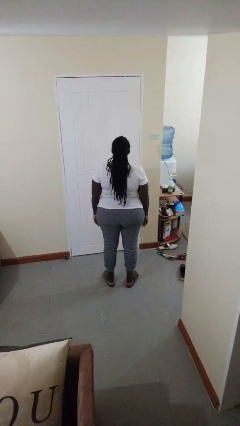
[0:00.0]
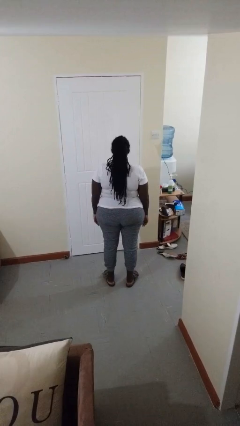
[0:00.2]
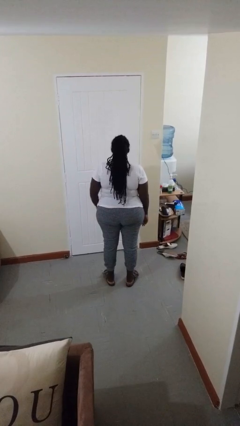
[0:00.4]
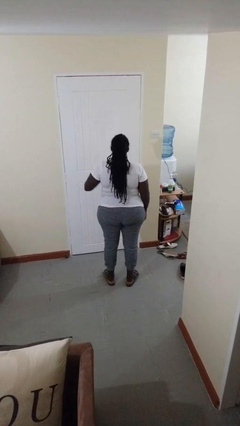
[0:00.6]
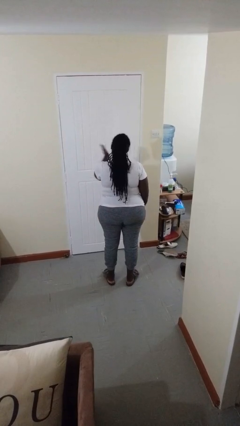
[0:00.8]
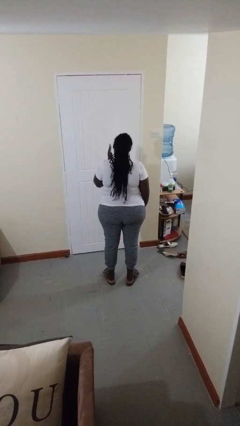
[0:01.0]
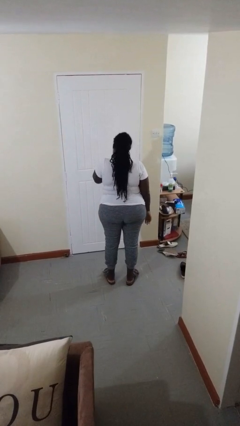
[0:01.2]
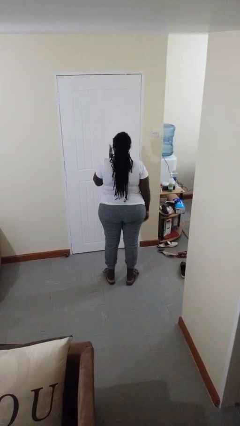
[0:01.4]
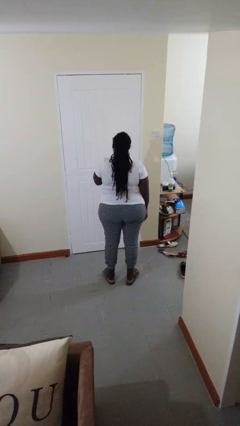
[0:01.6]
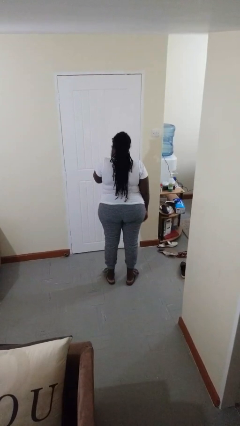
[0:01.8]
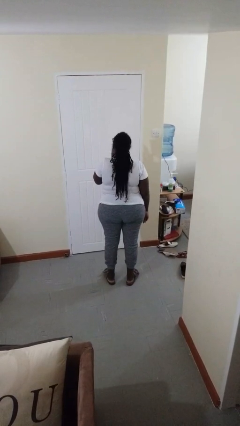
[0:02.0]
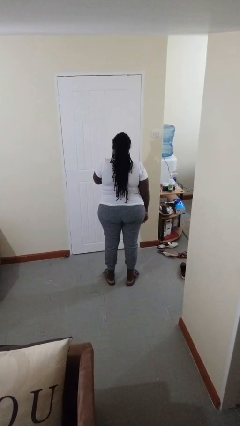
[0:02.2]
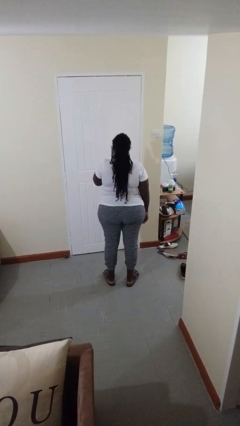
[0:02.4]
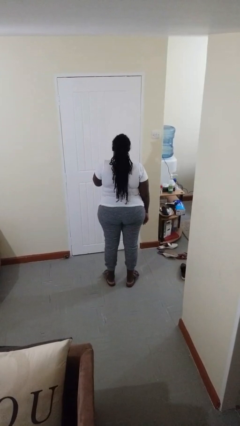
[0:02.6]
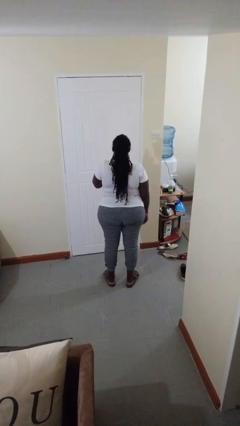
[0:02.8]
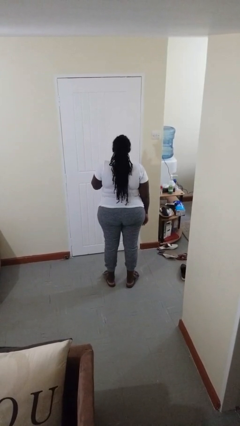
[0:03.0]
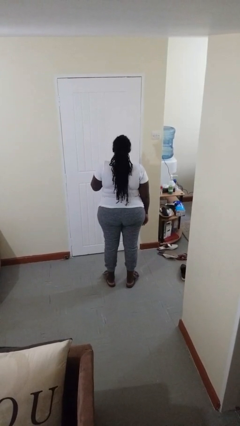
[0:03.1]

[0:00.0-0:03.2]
person swats bug

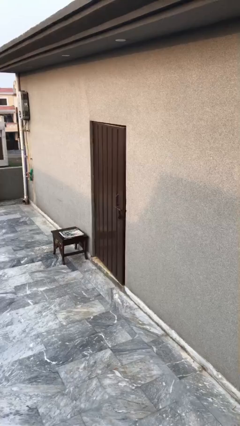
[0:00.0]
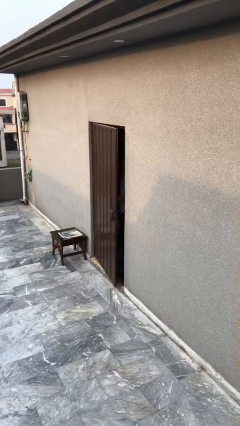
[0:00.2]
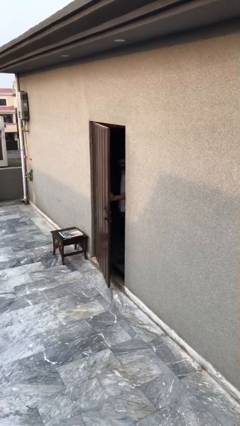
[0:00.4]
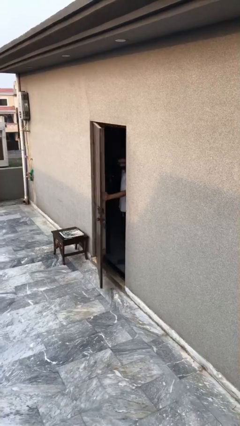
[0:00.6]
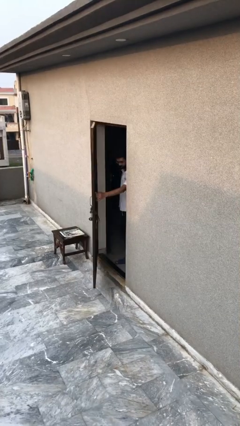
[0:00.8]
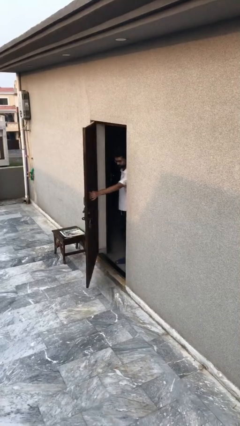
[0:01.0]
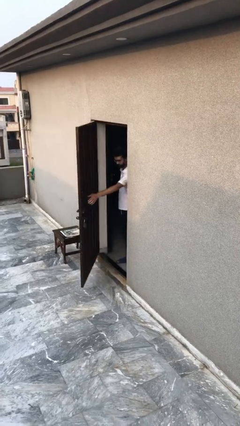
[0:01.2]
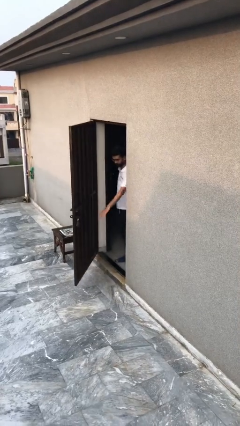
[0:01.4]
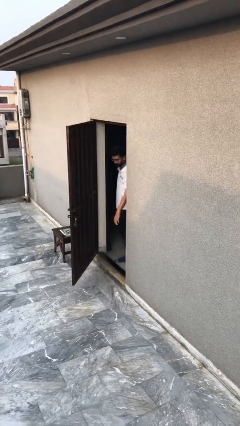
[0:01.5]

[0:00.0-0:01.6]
person opens facility door

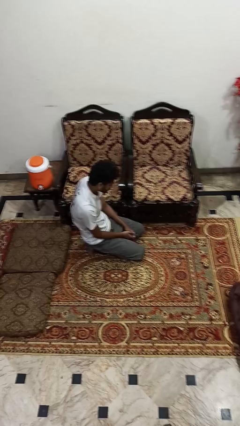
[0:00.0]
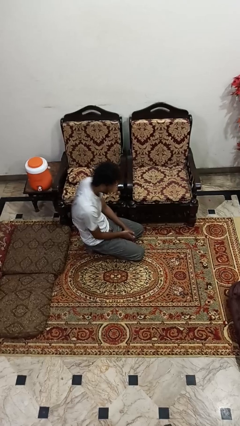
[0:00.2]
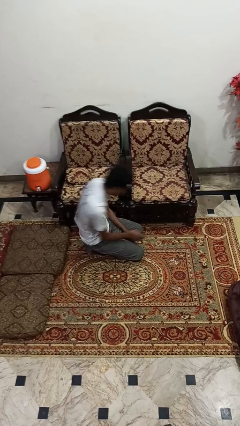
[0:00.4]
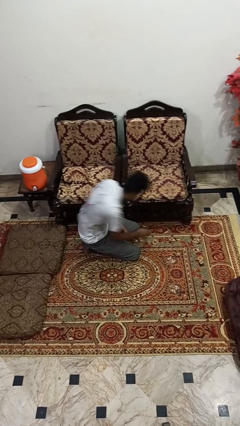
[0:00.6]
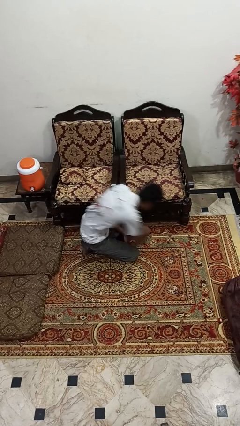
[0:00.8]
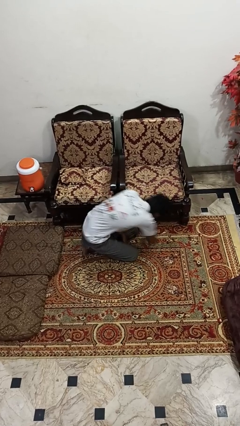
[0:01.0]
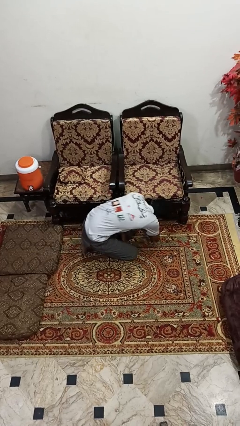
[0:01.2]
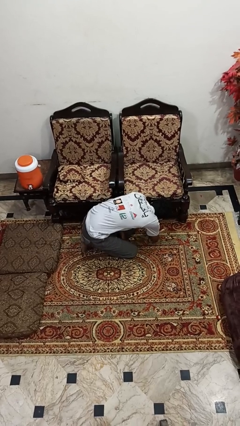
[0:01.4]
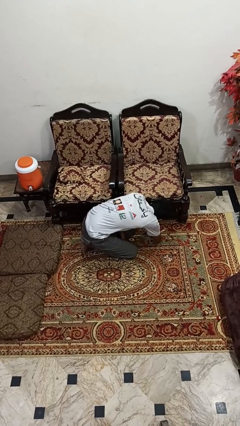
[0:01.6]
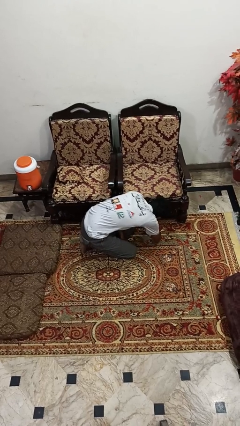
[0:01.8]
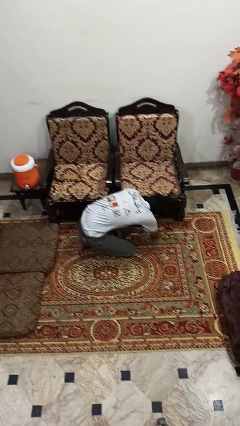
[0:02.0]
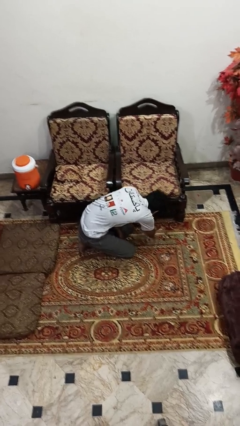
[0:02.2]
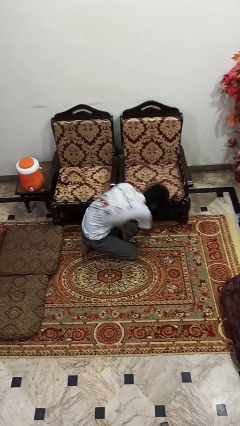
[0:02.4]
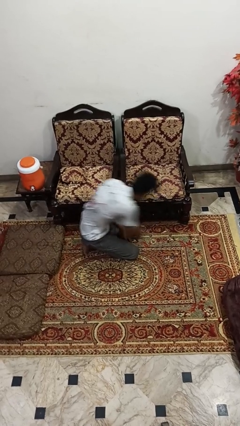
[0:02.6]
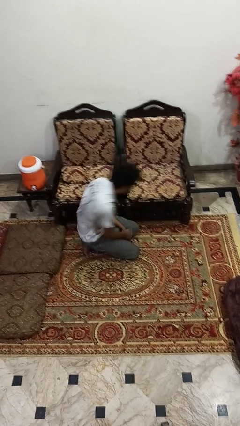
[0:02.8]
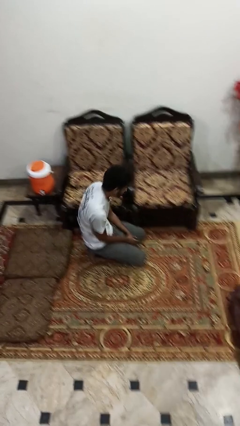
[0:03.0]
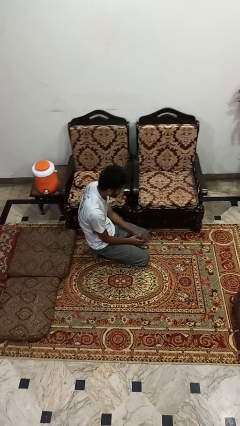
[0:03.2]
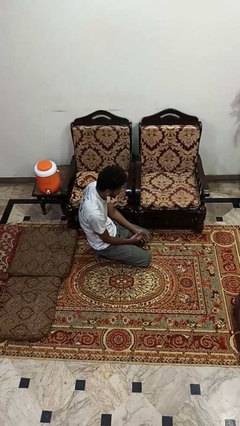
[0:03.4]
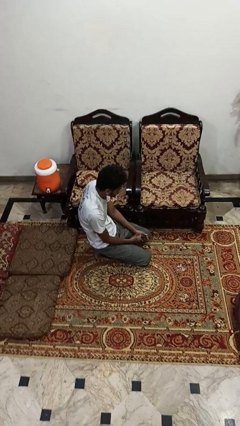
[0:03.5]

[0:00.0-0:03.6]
person searches under couch

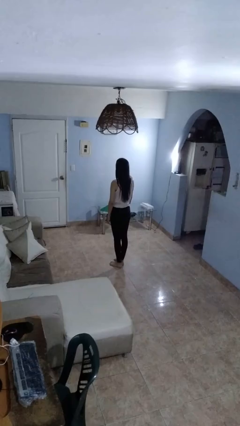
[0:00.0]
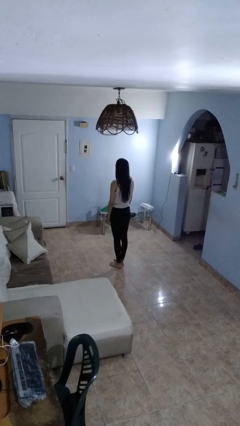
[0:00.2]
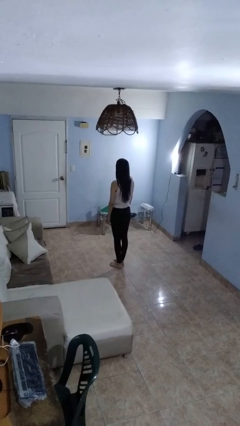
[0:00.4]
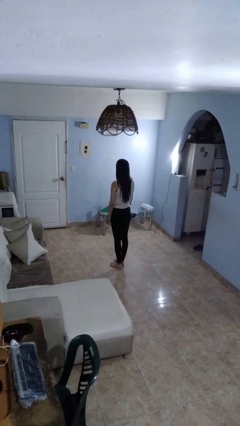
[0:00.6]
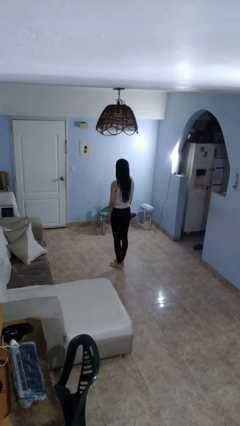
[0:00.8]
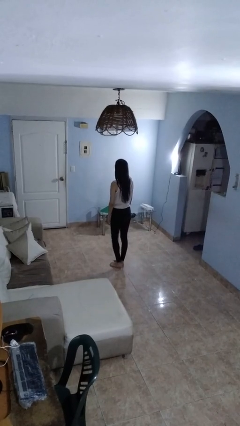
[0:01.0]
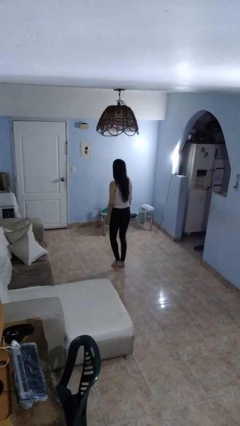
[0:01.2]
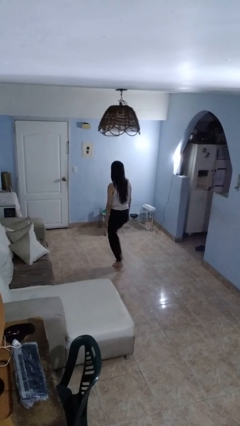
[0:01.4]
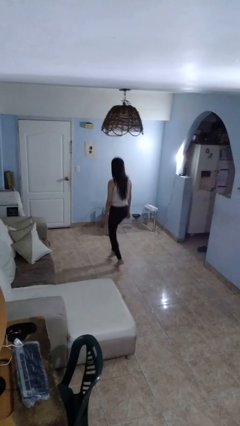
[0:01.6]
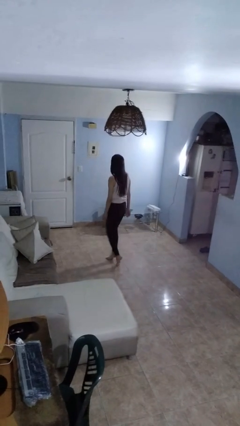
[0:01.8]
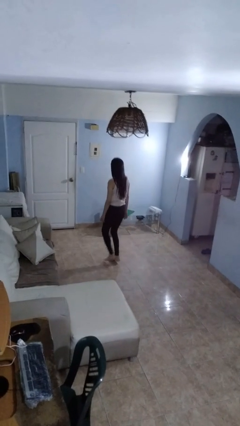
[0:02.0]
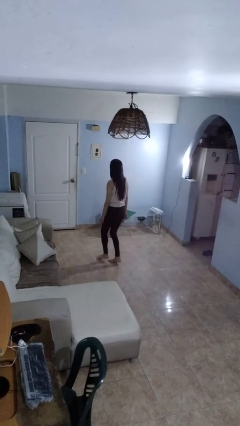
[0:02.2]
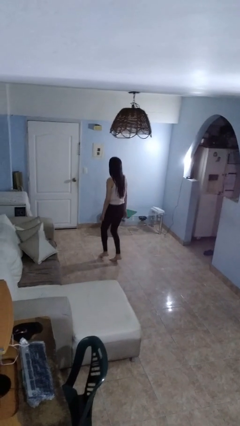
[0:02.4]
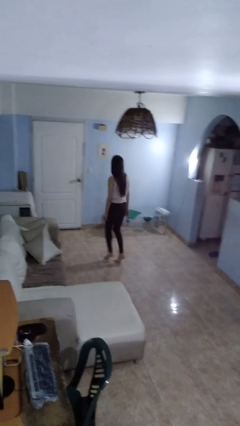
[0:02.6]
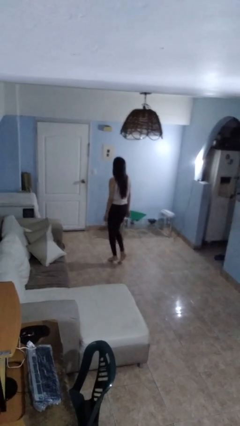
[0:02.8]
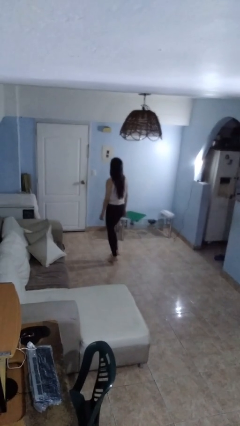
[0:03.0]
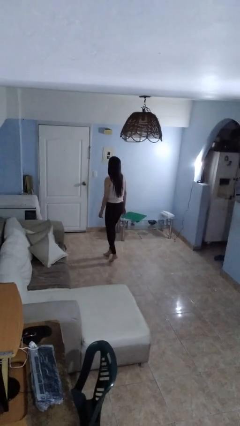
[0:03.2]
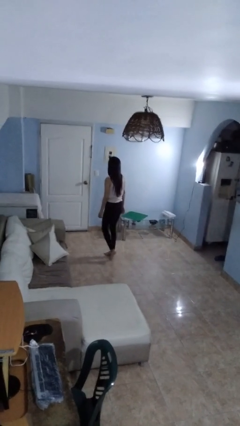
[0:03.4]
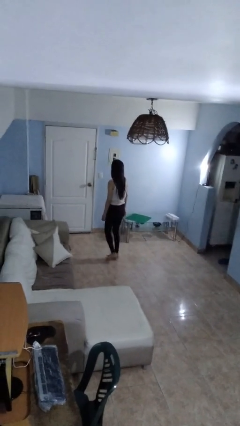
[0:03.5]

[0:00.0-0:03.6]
person walks tiptoe

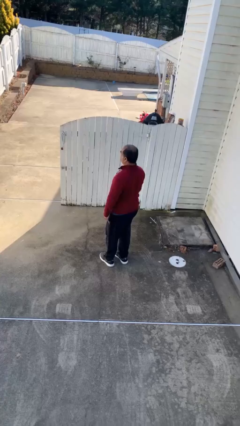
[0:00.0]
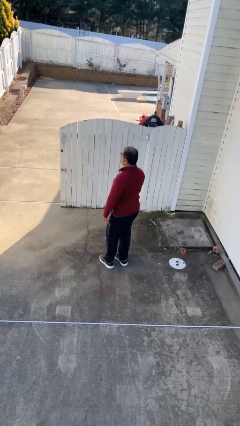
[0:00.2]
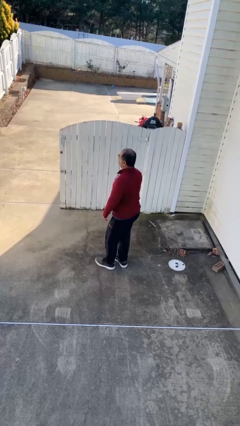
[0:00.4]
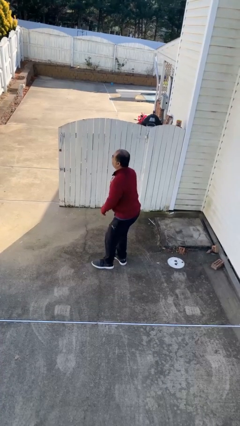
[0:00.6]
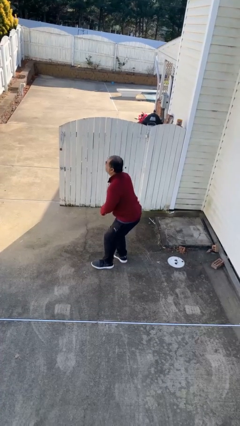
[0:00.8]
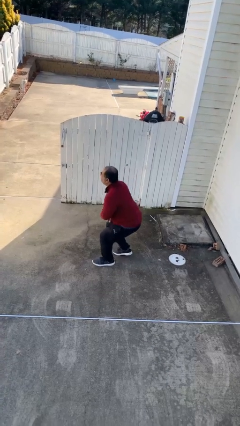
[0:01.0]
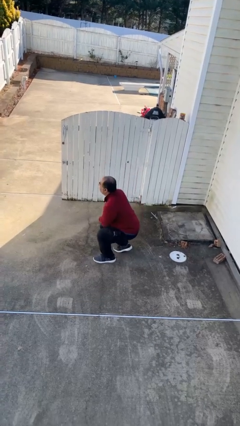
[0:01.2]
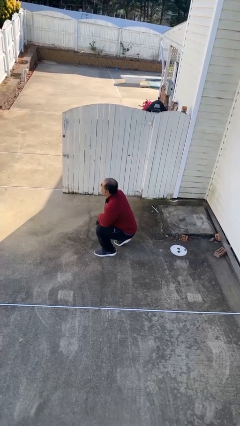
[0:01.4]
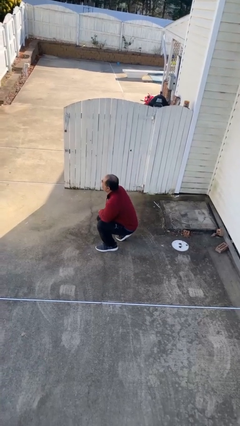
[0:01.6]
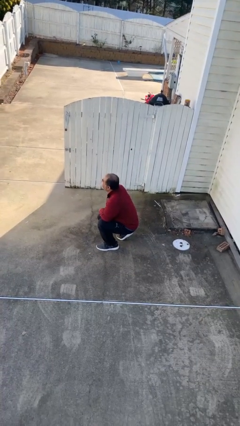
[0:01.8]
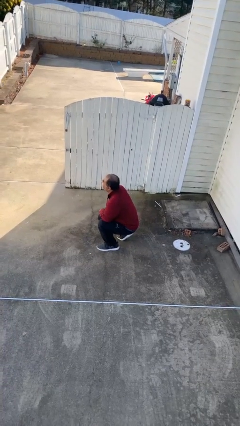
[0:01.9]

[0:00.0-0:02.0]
person sits down

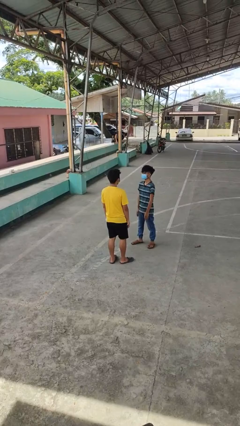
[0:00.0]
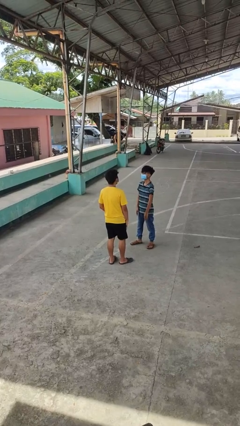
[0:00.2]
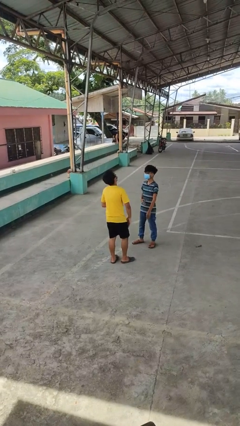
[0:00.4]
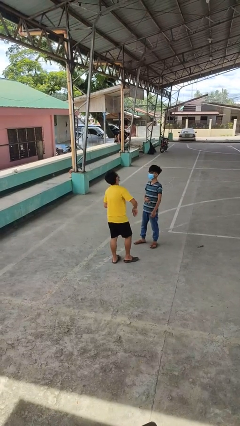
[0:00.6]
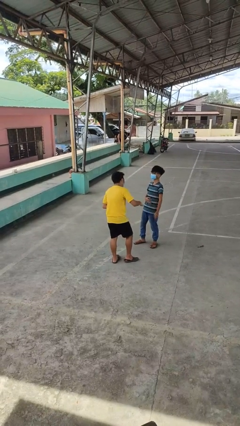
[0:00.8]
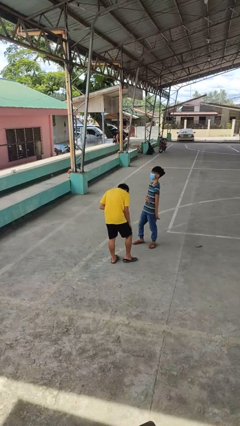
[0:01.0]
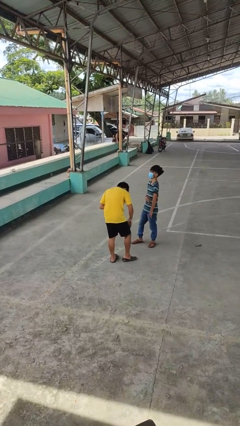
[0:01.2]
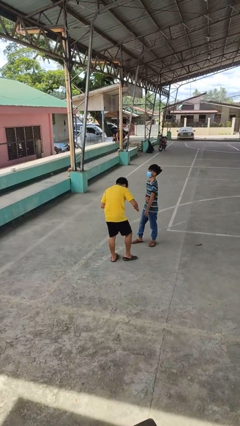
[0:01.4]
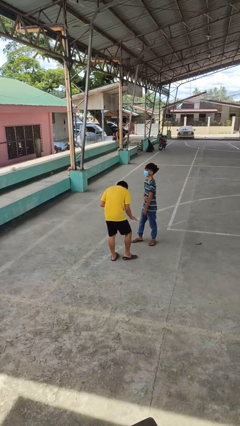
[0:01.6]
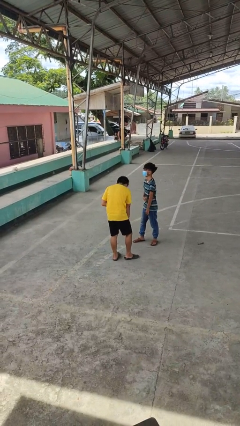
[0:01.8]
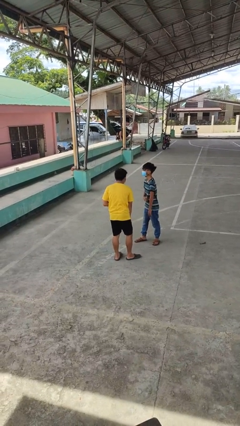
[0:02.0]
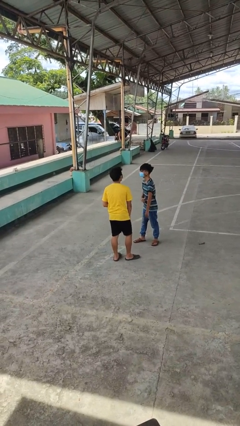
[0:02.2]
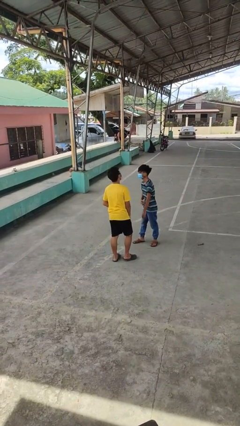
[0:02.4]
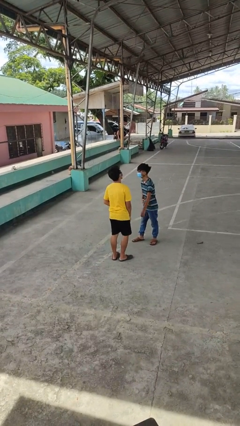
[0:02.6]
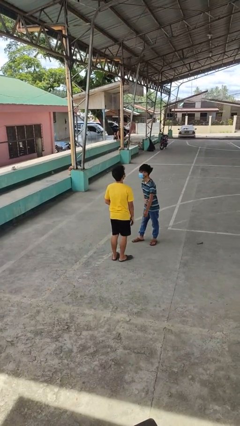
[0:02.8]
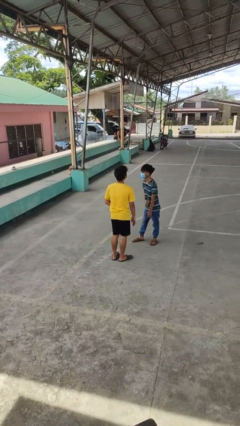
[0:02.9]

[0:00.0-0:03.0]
person laughs with person

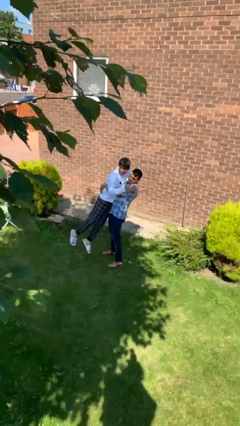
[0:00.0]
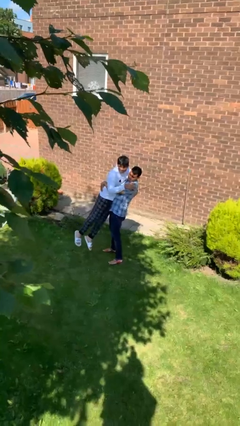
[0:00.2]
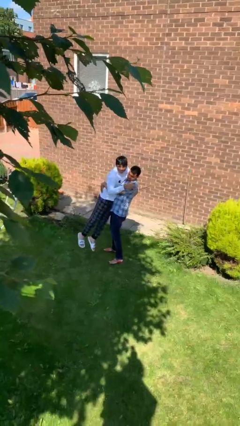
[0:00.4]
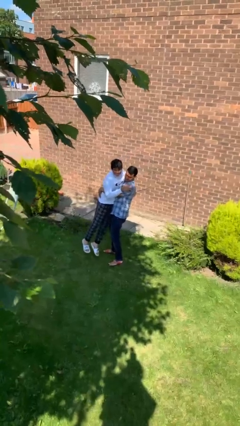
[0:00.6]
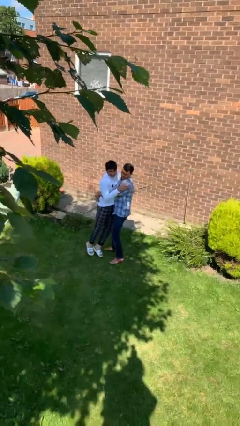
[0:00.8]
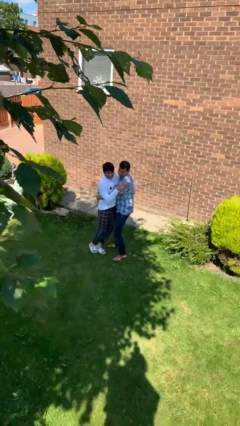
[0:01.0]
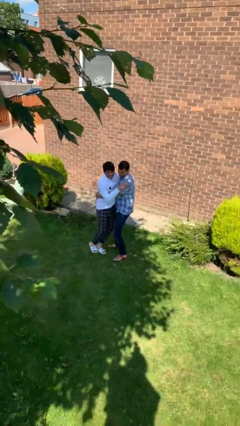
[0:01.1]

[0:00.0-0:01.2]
person puts down person
